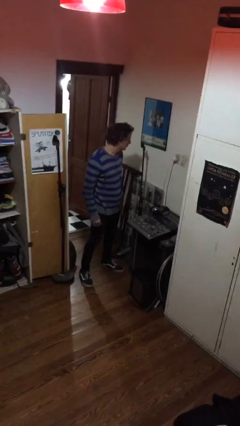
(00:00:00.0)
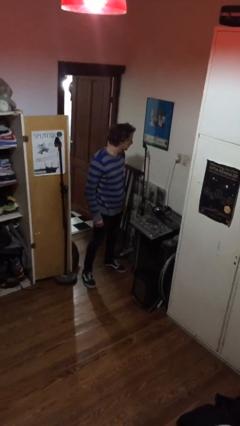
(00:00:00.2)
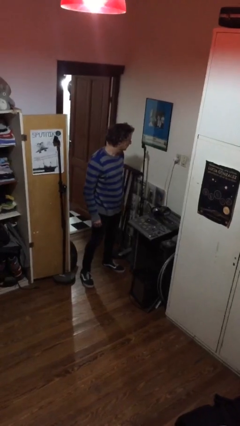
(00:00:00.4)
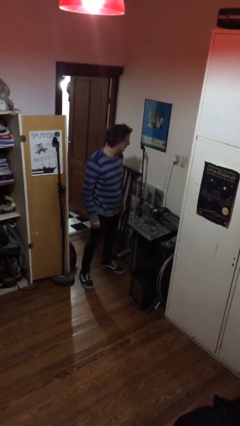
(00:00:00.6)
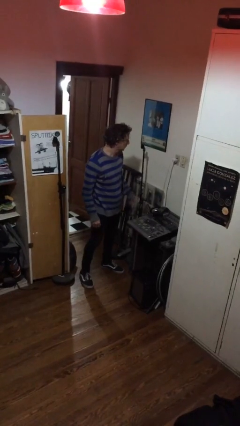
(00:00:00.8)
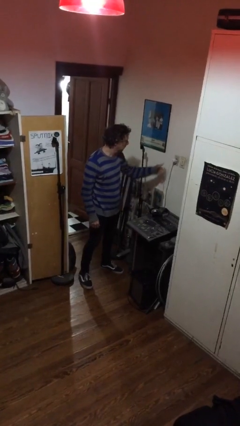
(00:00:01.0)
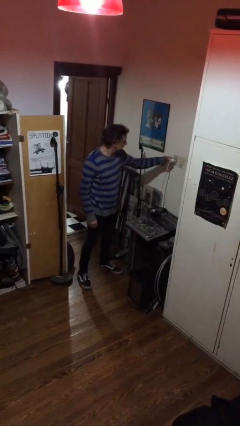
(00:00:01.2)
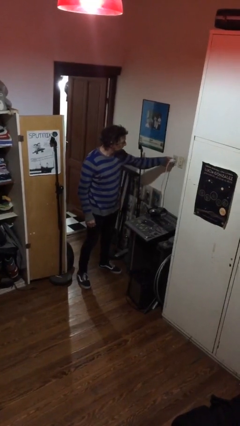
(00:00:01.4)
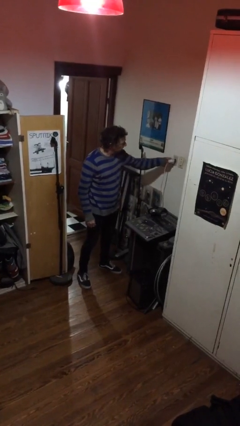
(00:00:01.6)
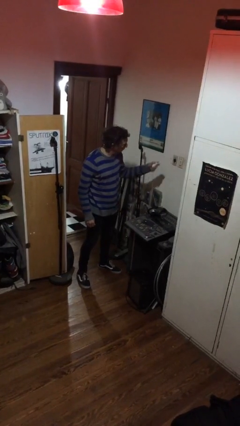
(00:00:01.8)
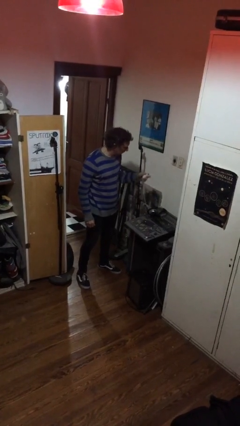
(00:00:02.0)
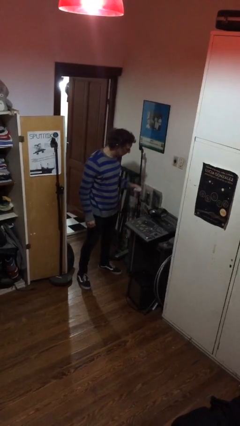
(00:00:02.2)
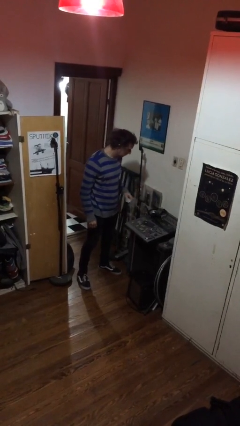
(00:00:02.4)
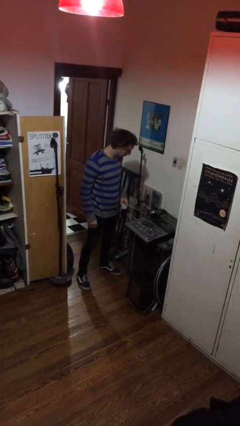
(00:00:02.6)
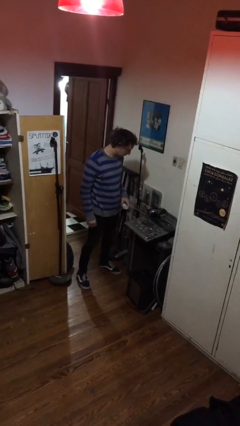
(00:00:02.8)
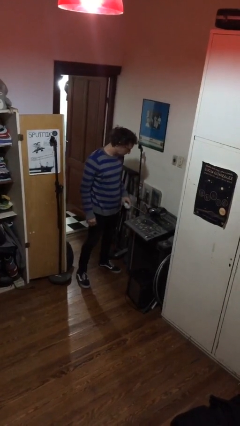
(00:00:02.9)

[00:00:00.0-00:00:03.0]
person unplugs from electrical socket

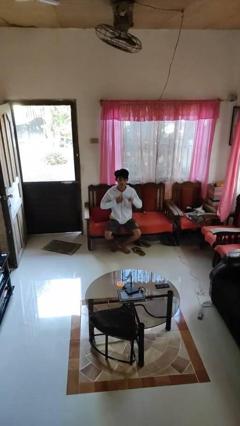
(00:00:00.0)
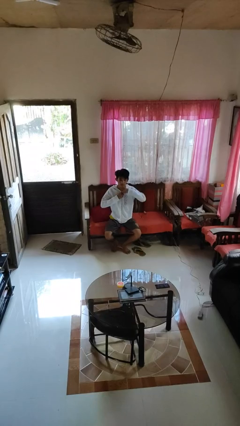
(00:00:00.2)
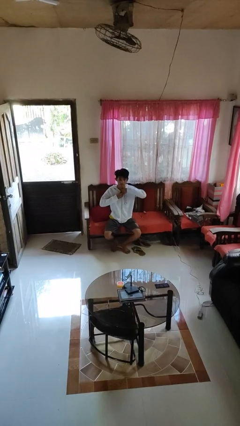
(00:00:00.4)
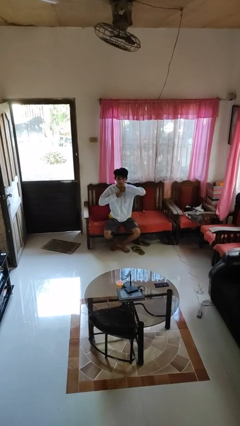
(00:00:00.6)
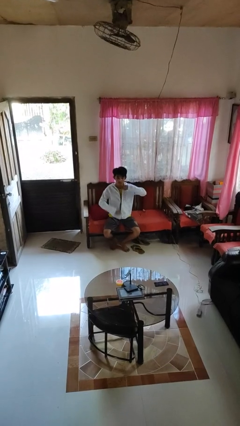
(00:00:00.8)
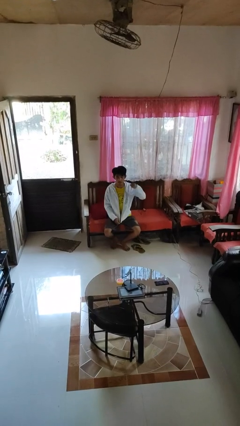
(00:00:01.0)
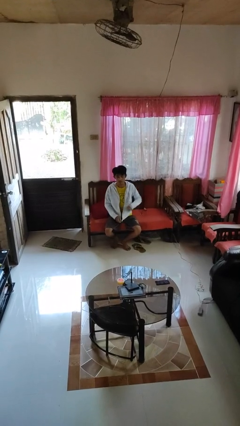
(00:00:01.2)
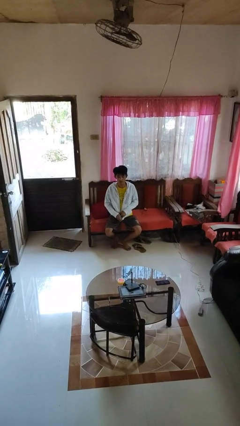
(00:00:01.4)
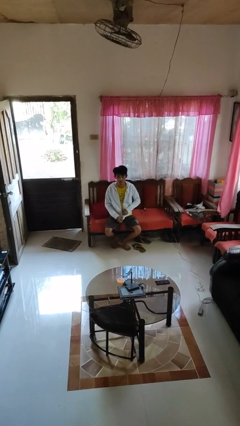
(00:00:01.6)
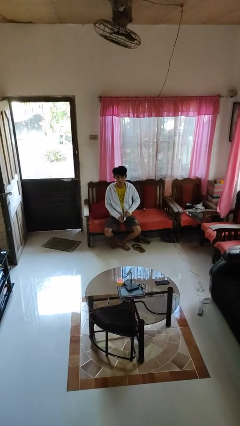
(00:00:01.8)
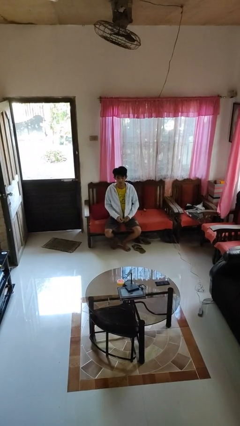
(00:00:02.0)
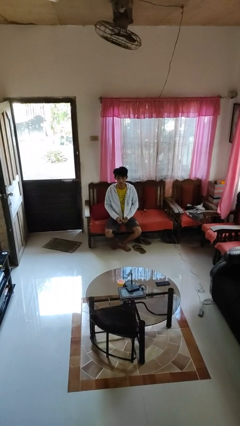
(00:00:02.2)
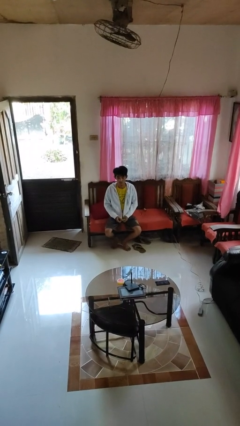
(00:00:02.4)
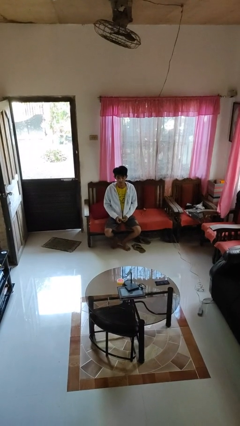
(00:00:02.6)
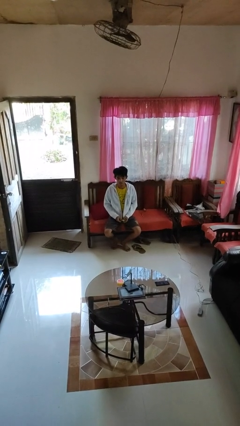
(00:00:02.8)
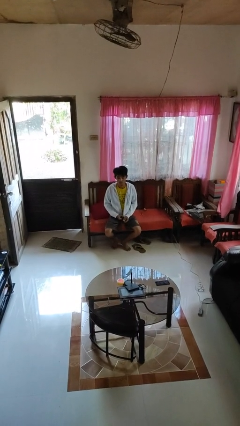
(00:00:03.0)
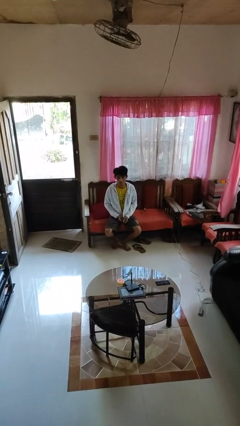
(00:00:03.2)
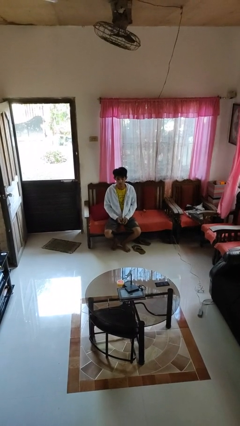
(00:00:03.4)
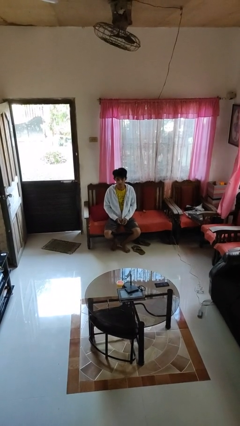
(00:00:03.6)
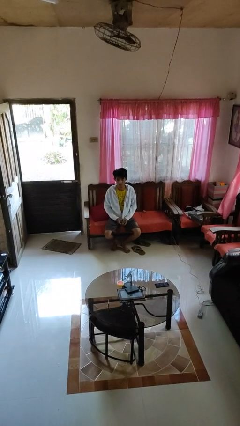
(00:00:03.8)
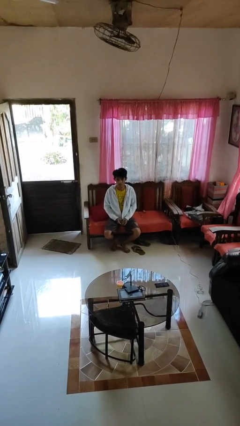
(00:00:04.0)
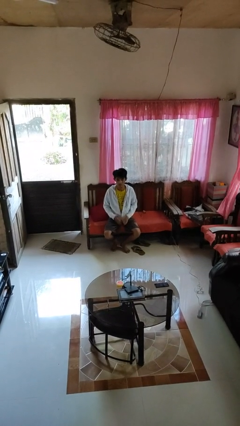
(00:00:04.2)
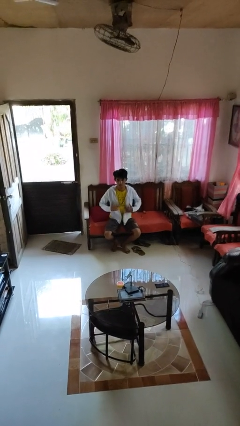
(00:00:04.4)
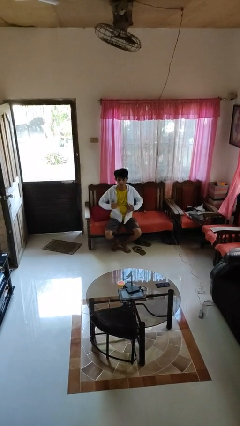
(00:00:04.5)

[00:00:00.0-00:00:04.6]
person unzips jacket

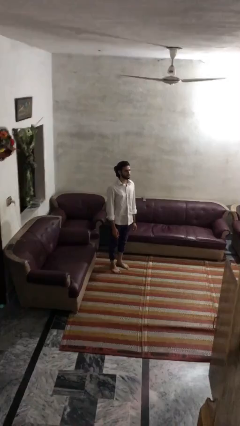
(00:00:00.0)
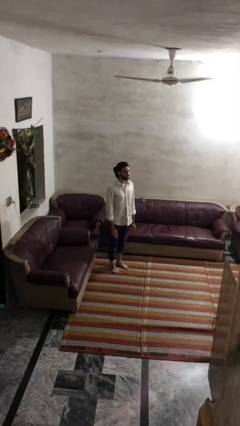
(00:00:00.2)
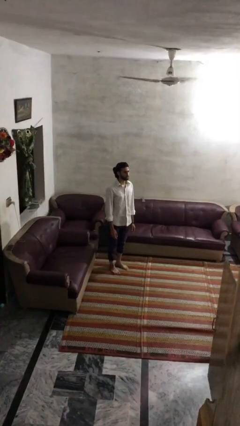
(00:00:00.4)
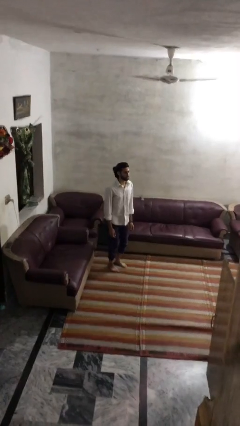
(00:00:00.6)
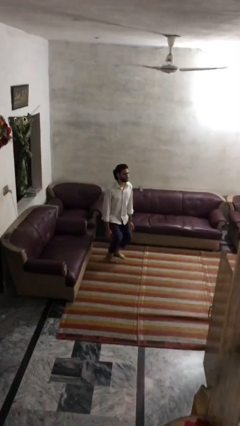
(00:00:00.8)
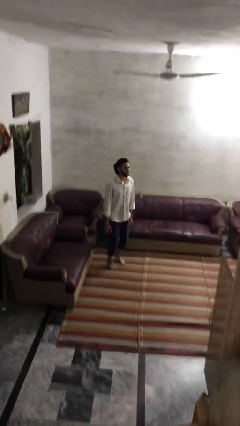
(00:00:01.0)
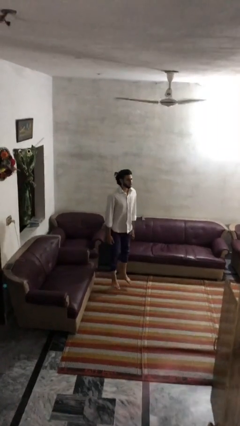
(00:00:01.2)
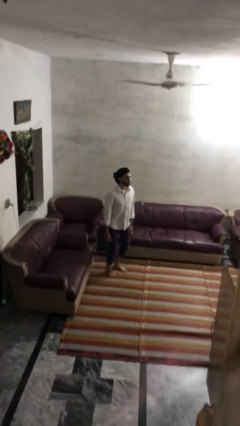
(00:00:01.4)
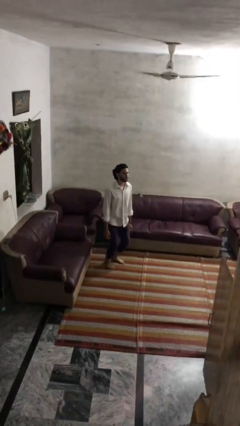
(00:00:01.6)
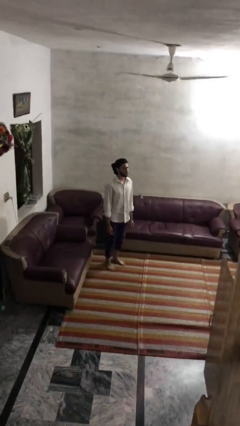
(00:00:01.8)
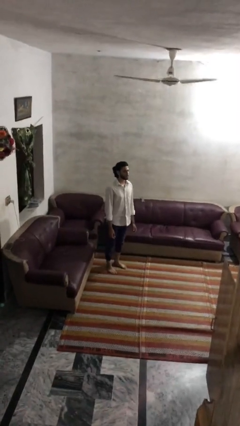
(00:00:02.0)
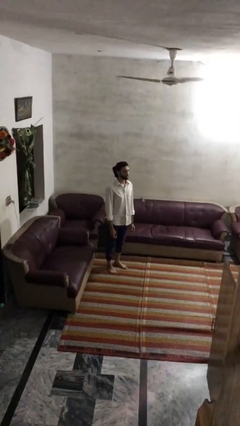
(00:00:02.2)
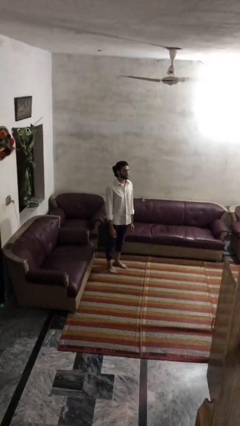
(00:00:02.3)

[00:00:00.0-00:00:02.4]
person jumps

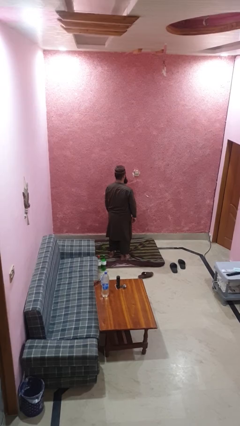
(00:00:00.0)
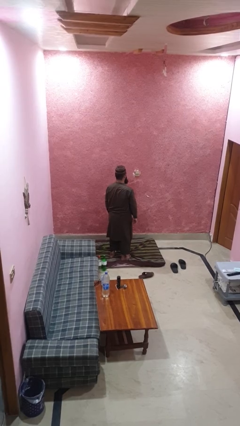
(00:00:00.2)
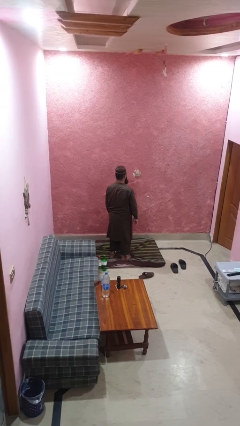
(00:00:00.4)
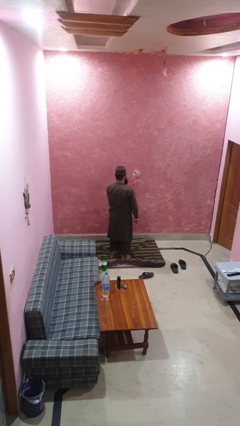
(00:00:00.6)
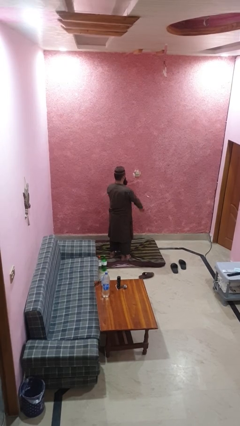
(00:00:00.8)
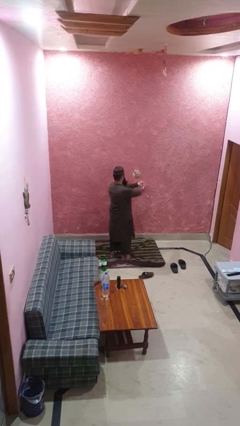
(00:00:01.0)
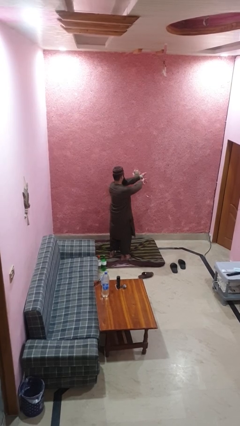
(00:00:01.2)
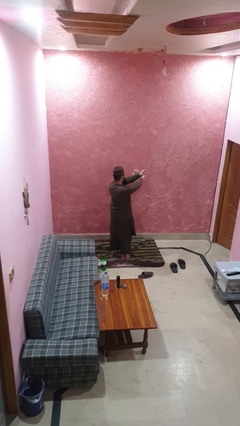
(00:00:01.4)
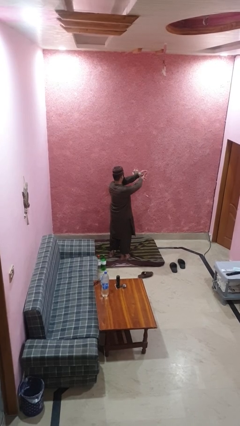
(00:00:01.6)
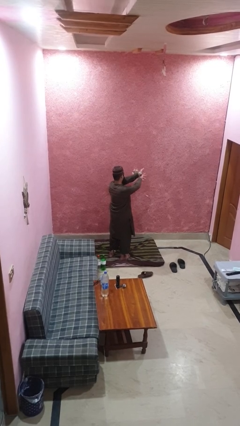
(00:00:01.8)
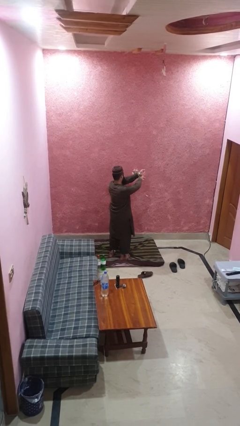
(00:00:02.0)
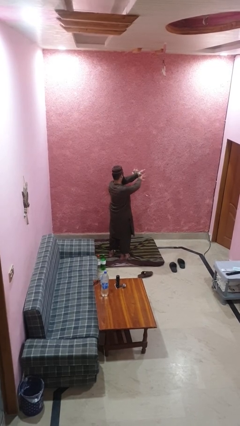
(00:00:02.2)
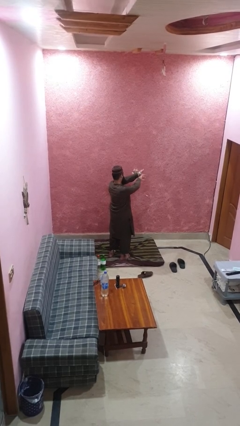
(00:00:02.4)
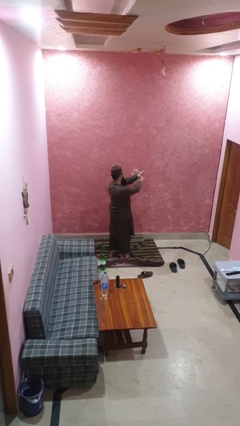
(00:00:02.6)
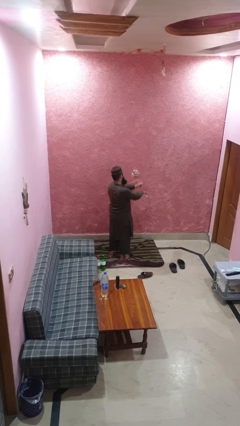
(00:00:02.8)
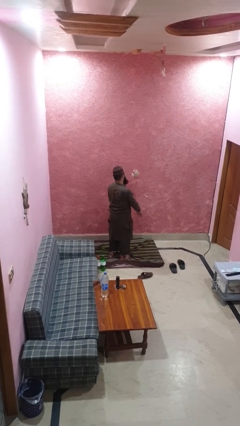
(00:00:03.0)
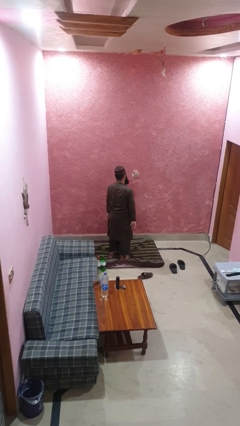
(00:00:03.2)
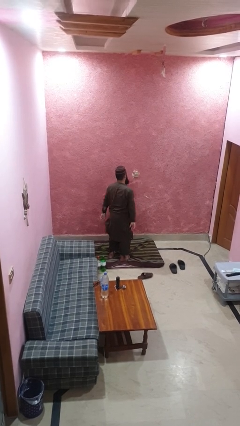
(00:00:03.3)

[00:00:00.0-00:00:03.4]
person snaps fingers

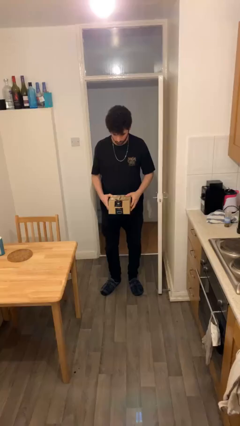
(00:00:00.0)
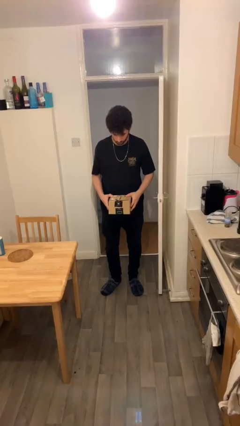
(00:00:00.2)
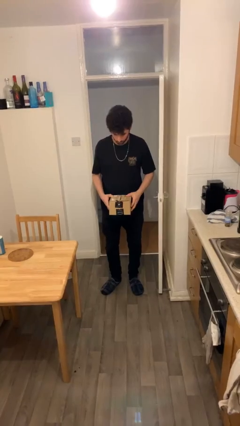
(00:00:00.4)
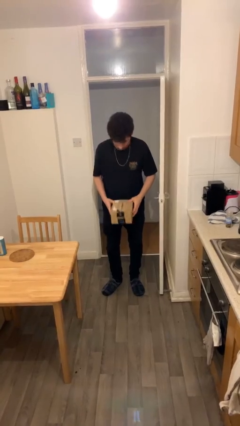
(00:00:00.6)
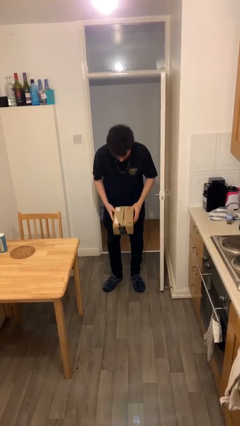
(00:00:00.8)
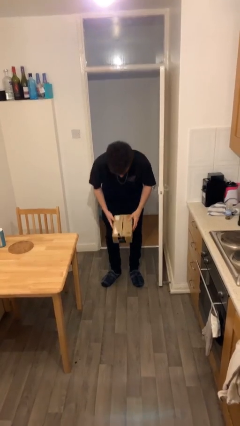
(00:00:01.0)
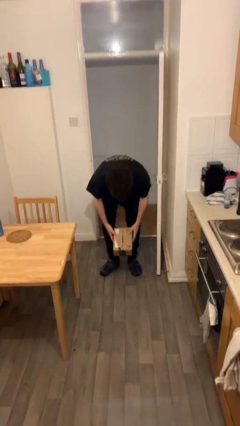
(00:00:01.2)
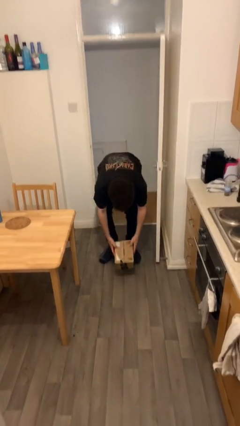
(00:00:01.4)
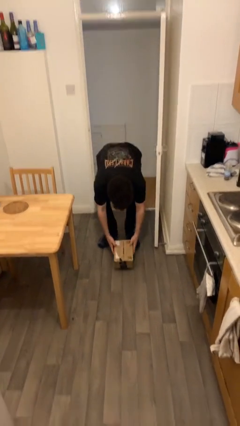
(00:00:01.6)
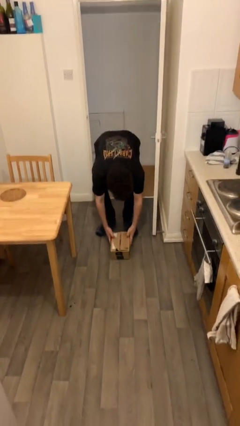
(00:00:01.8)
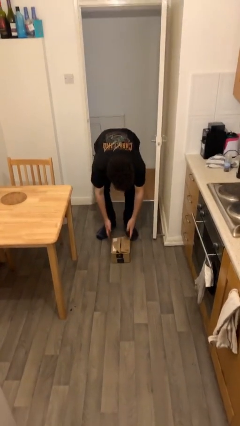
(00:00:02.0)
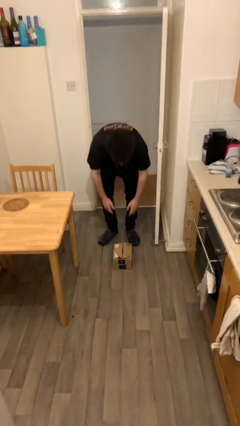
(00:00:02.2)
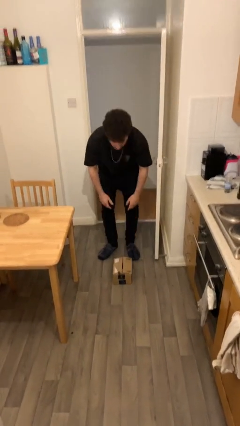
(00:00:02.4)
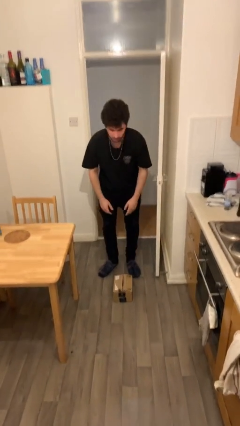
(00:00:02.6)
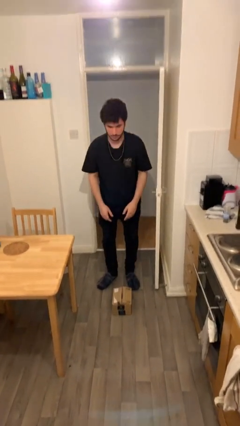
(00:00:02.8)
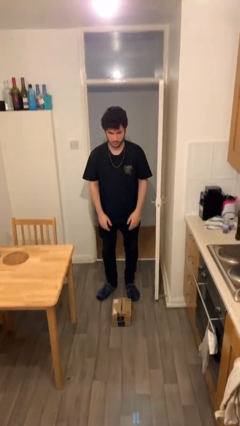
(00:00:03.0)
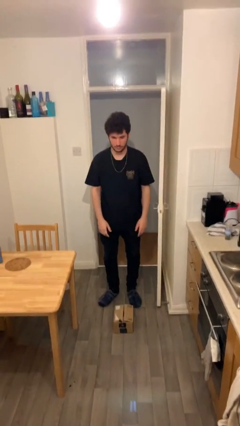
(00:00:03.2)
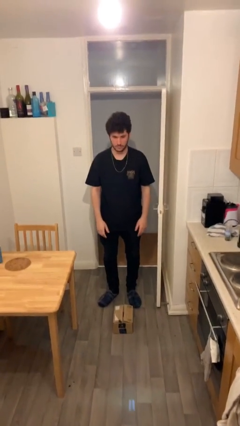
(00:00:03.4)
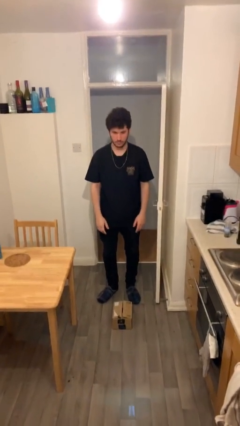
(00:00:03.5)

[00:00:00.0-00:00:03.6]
person puts down object on floor

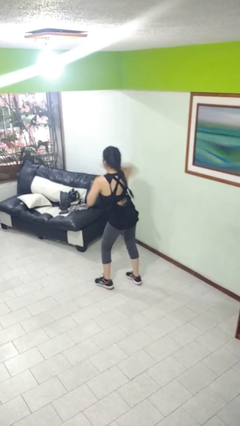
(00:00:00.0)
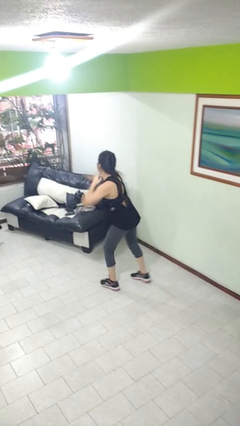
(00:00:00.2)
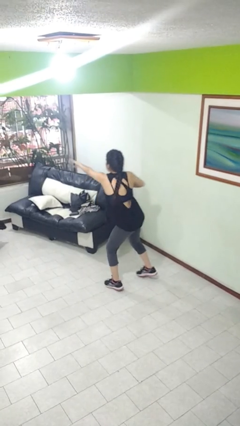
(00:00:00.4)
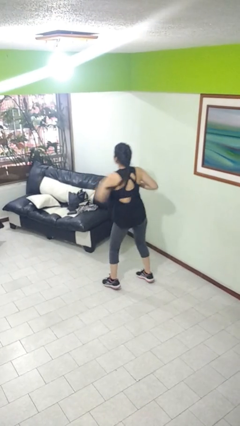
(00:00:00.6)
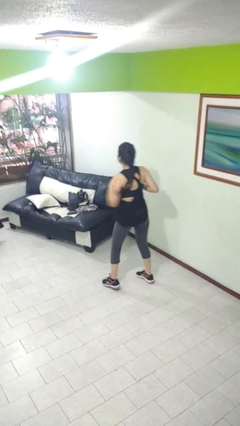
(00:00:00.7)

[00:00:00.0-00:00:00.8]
person karate chop
